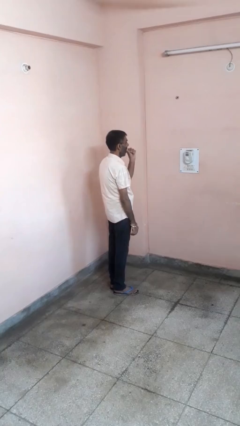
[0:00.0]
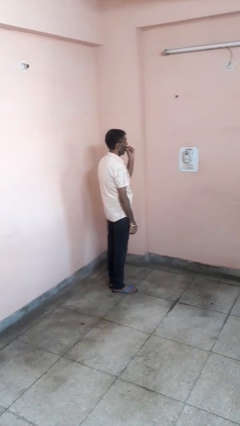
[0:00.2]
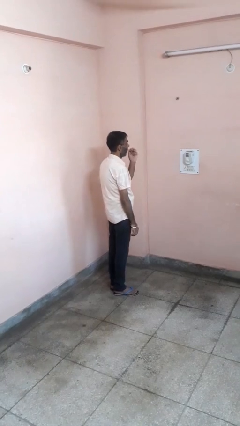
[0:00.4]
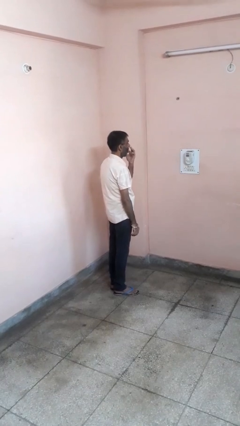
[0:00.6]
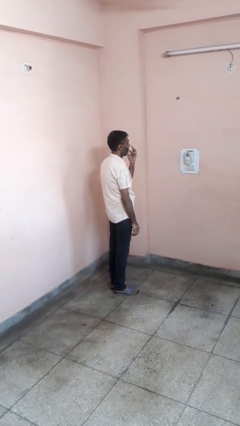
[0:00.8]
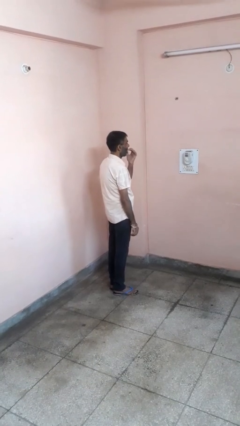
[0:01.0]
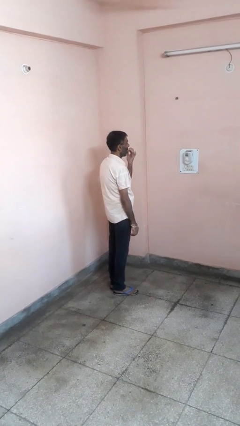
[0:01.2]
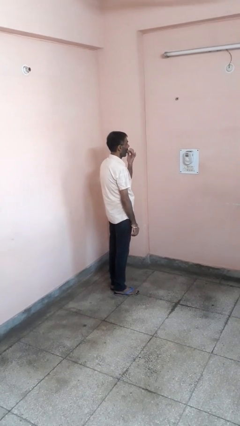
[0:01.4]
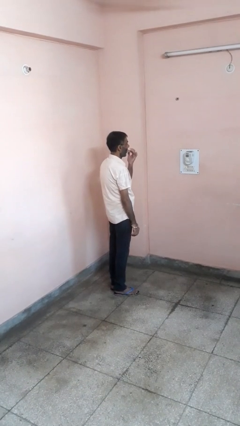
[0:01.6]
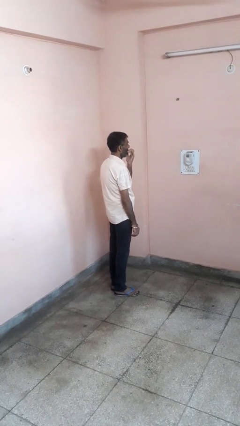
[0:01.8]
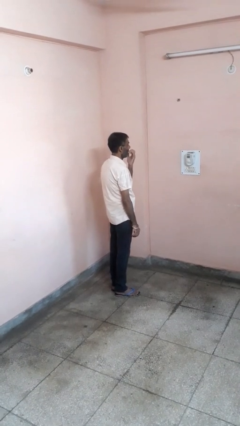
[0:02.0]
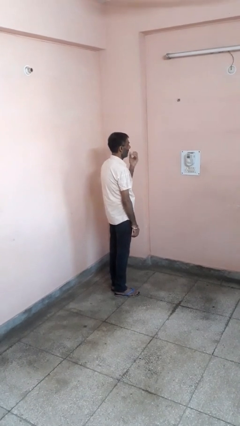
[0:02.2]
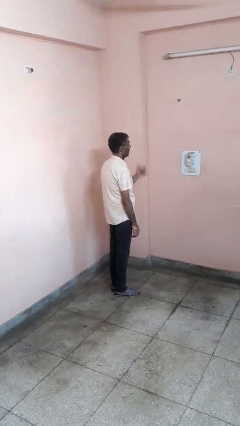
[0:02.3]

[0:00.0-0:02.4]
person licks fingers

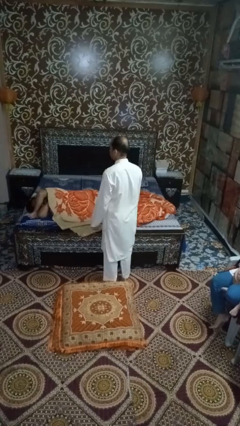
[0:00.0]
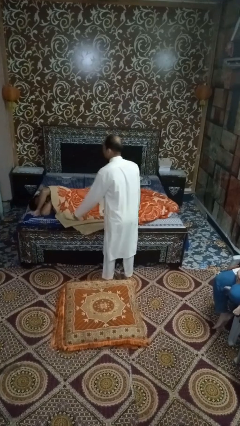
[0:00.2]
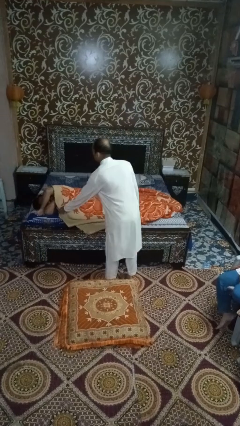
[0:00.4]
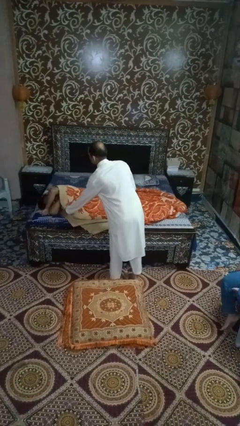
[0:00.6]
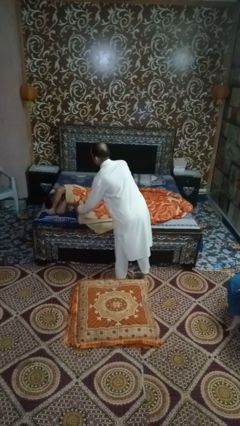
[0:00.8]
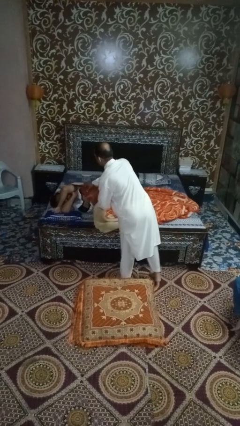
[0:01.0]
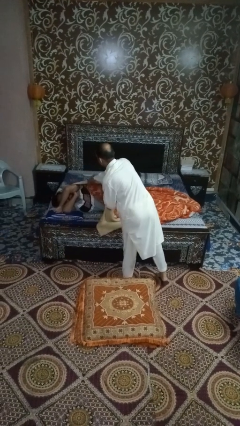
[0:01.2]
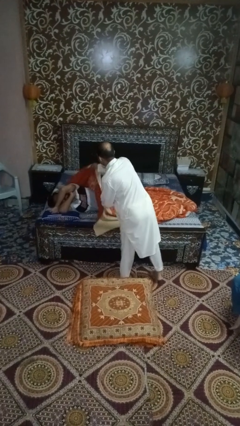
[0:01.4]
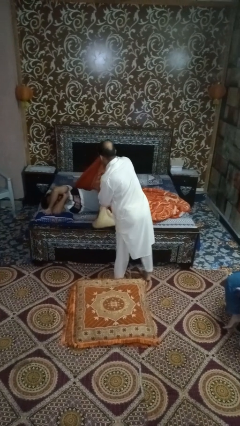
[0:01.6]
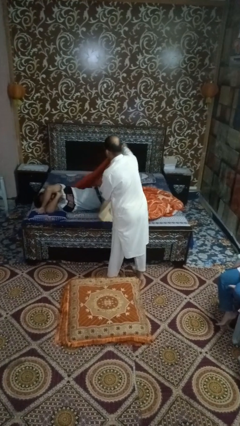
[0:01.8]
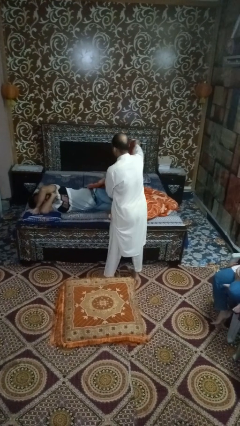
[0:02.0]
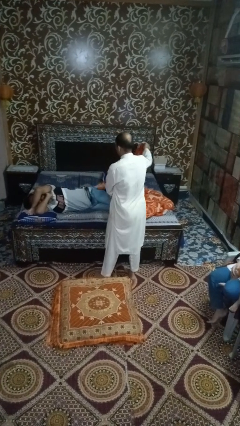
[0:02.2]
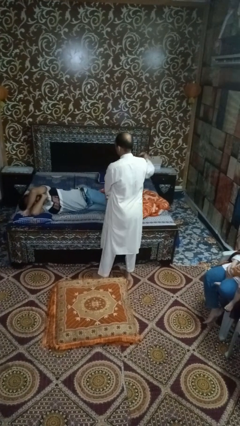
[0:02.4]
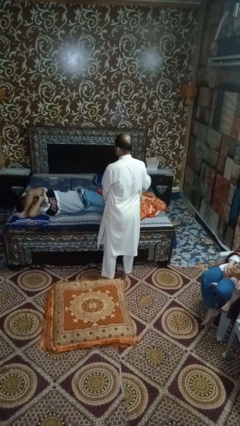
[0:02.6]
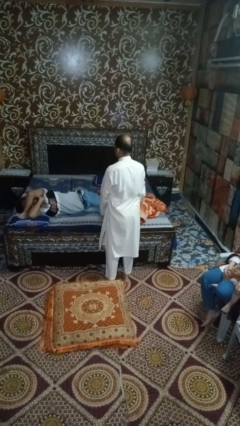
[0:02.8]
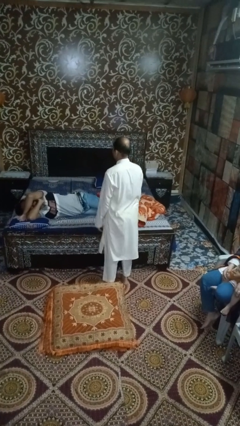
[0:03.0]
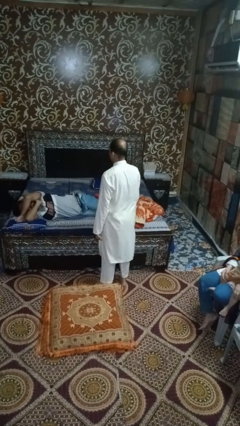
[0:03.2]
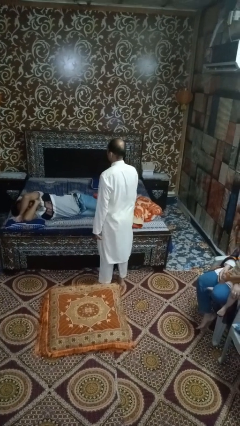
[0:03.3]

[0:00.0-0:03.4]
person uncovers friend with blanket

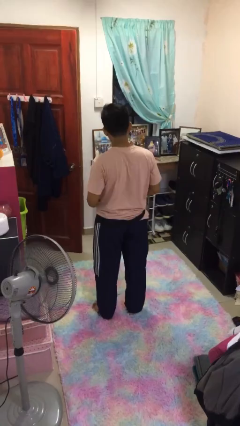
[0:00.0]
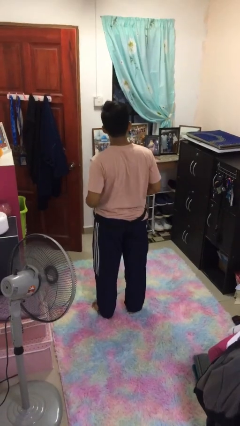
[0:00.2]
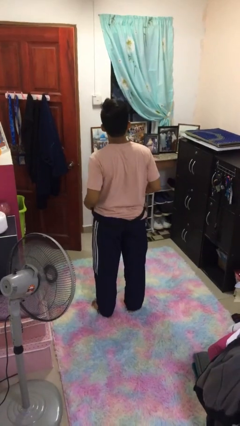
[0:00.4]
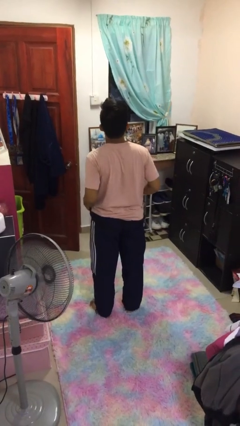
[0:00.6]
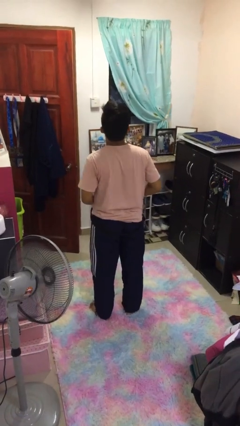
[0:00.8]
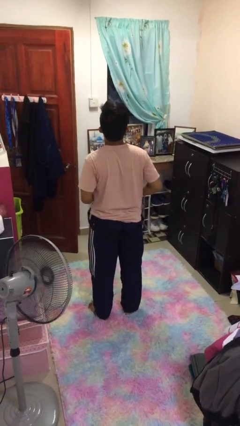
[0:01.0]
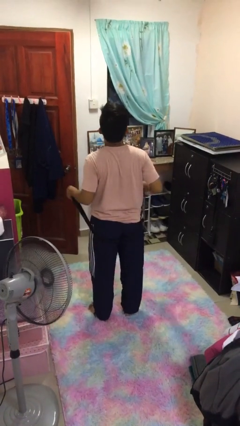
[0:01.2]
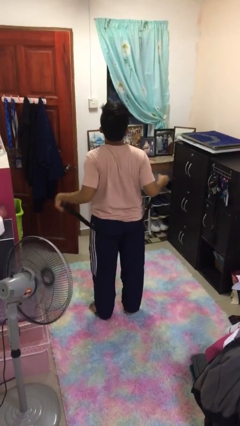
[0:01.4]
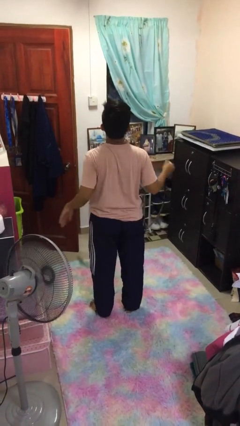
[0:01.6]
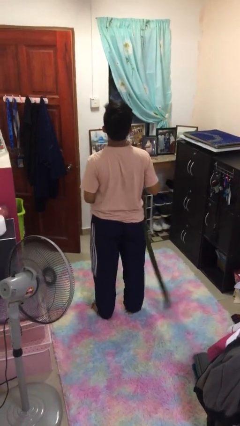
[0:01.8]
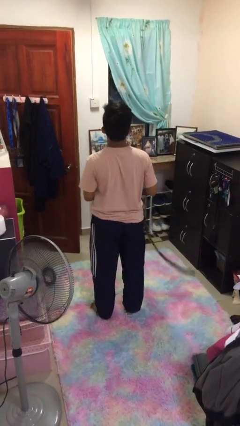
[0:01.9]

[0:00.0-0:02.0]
person takes off belt

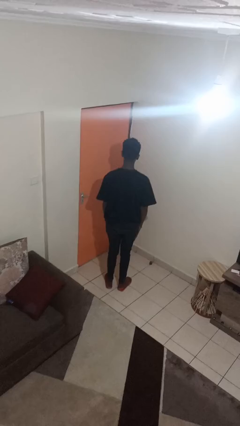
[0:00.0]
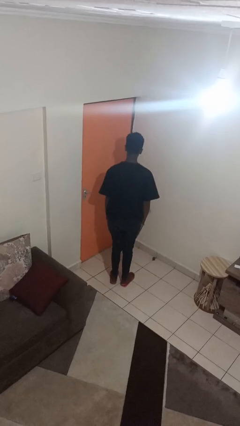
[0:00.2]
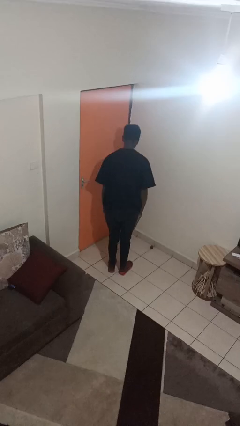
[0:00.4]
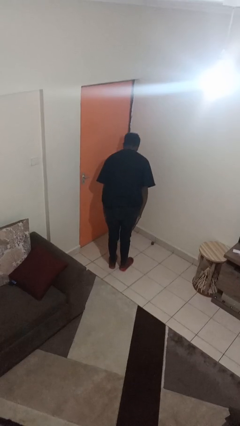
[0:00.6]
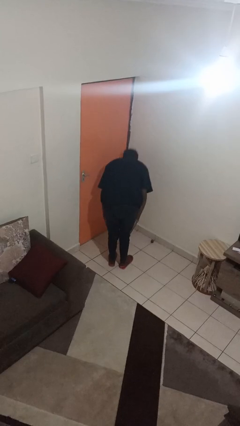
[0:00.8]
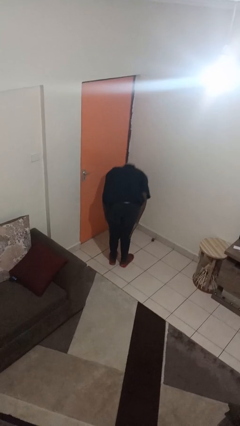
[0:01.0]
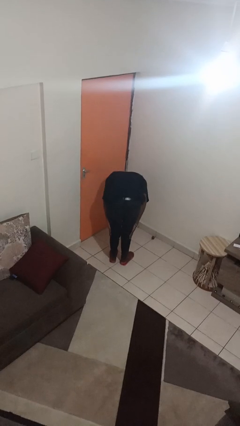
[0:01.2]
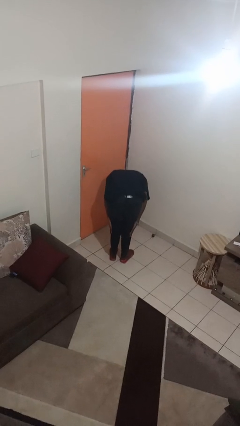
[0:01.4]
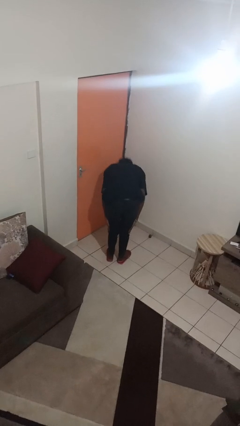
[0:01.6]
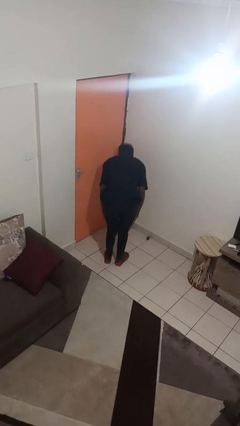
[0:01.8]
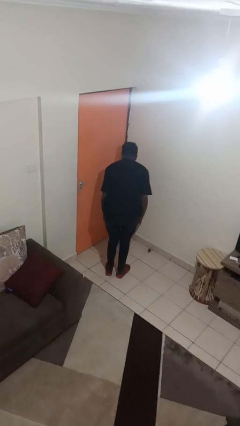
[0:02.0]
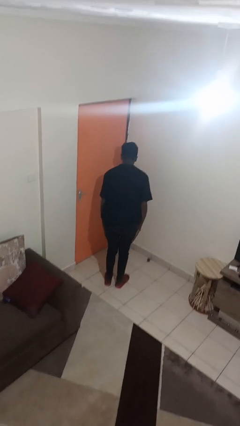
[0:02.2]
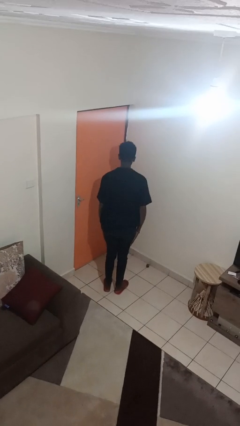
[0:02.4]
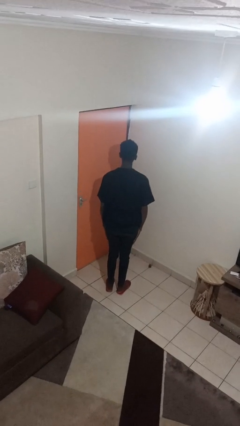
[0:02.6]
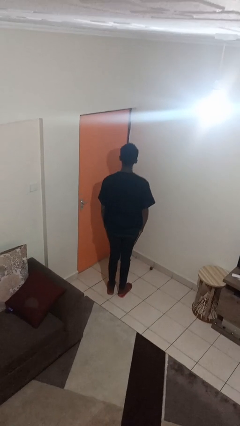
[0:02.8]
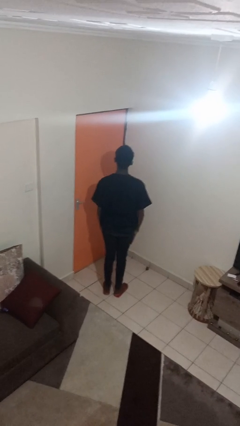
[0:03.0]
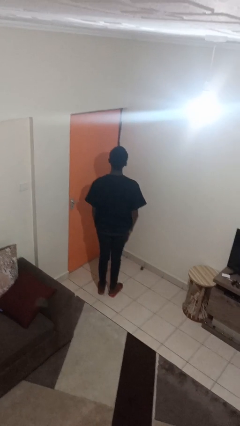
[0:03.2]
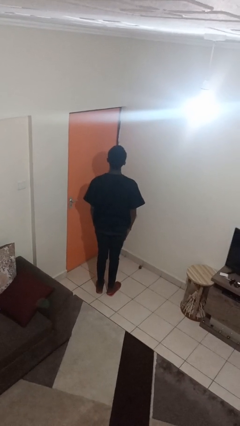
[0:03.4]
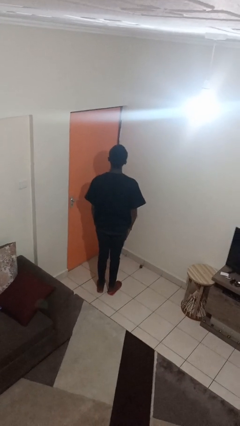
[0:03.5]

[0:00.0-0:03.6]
person bows

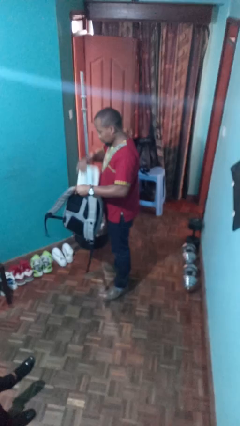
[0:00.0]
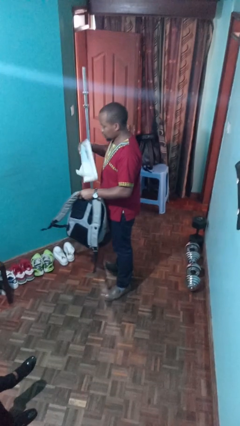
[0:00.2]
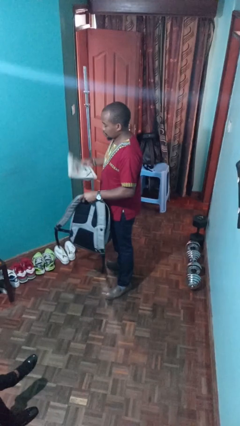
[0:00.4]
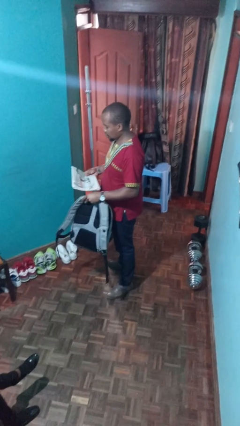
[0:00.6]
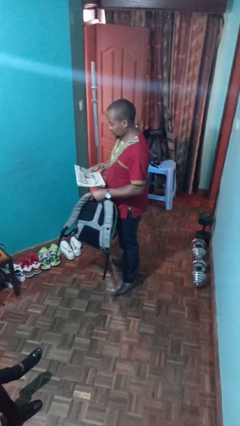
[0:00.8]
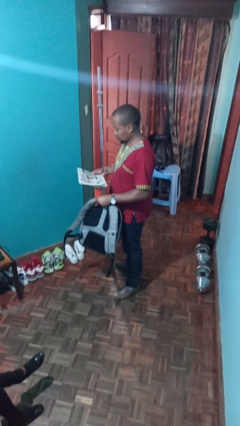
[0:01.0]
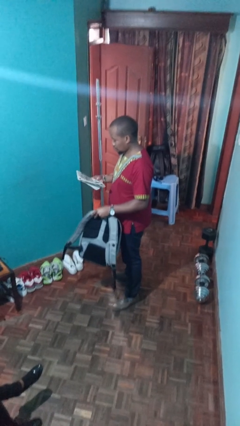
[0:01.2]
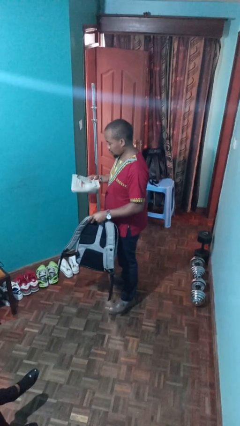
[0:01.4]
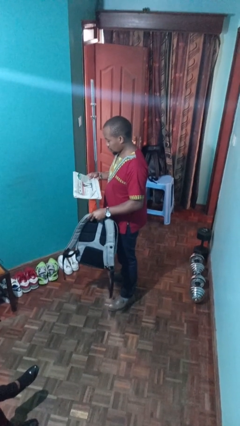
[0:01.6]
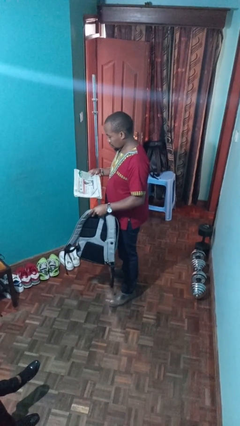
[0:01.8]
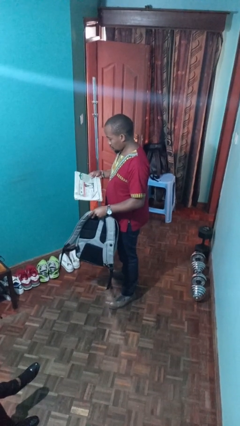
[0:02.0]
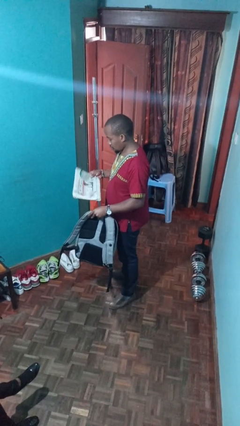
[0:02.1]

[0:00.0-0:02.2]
person takes object from backpack

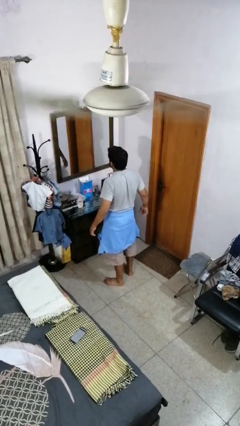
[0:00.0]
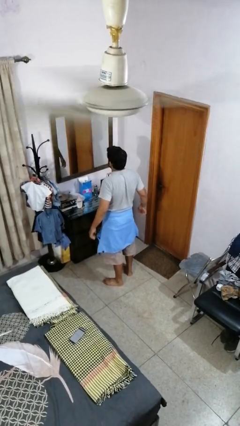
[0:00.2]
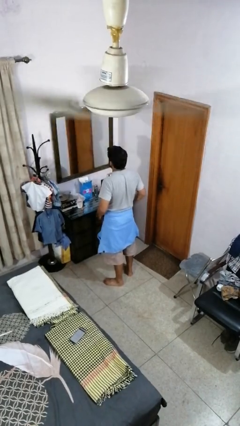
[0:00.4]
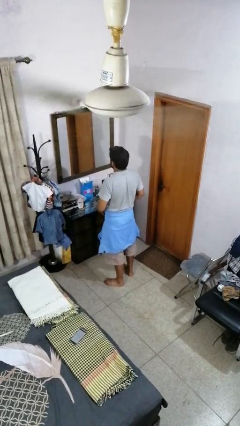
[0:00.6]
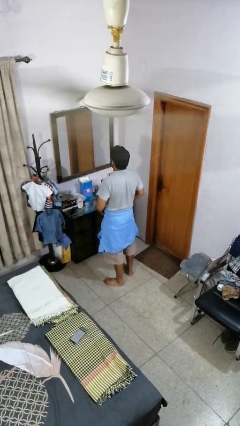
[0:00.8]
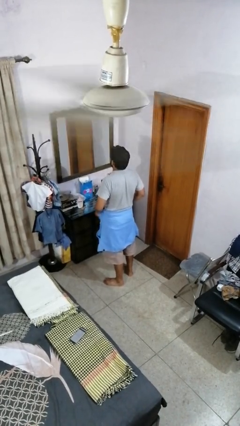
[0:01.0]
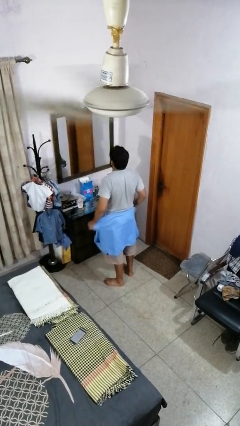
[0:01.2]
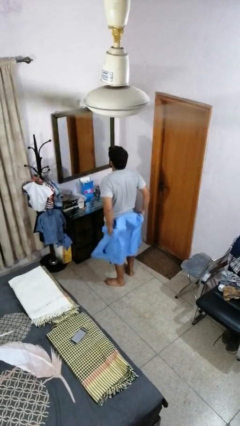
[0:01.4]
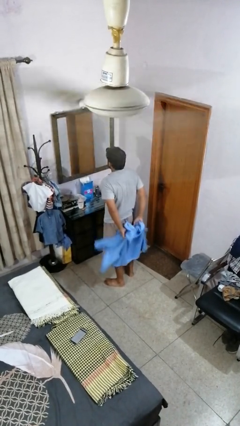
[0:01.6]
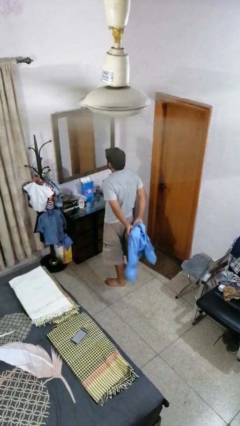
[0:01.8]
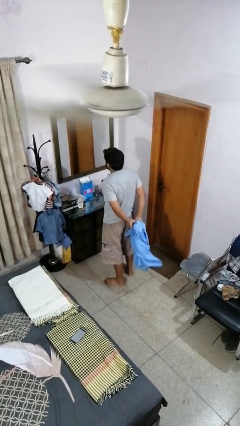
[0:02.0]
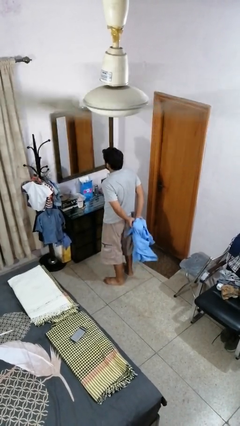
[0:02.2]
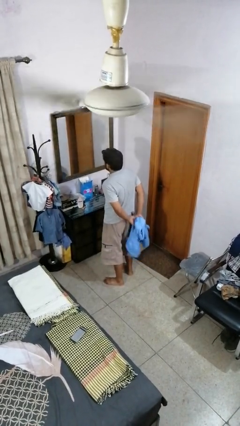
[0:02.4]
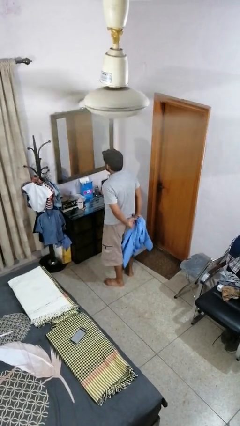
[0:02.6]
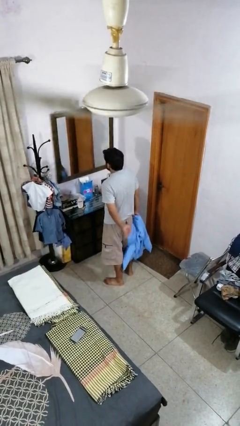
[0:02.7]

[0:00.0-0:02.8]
person unties jacket around waist

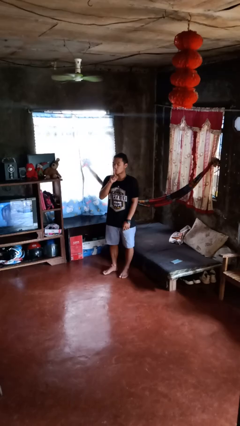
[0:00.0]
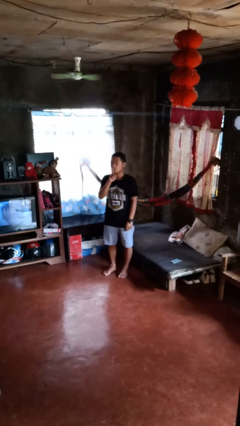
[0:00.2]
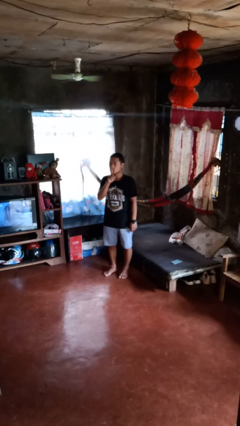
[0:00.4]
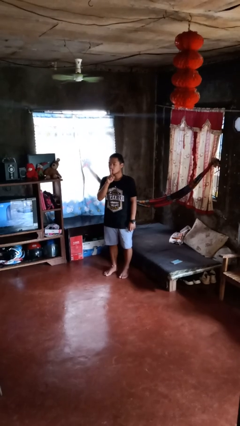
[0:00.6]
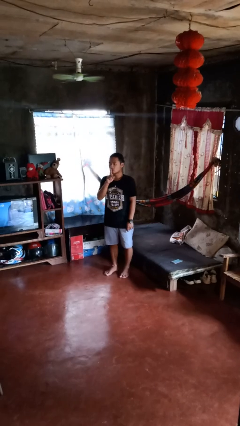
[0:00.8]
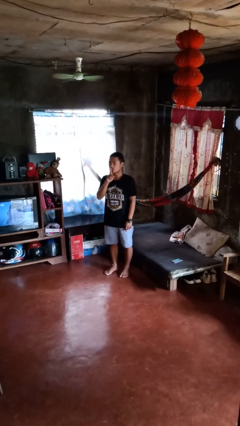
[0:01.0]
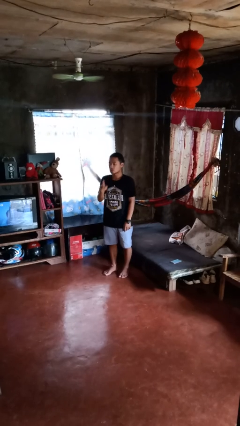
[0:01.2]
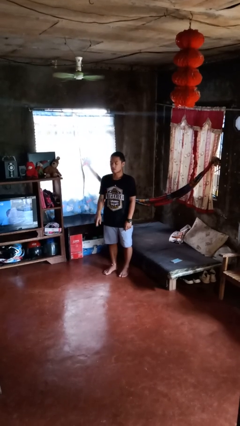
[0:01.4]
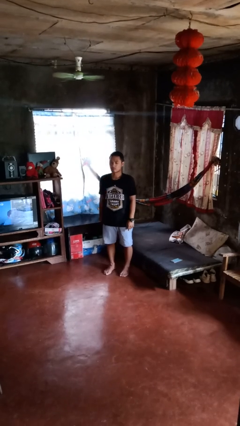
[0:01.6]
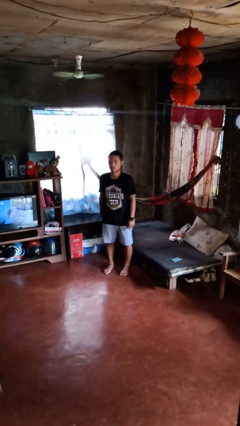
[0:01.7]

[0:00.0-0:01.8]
person gestures be quiet
